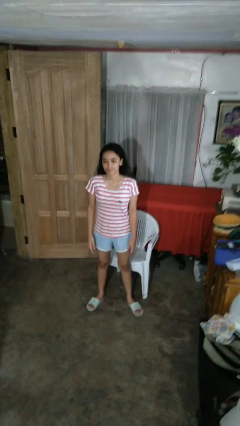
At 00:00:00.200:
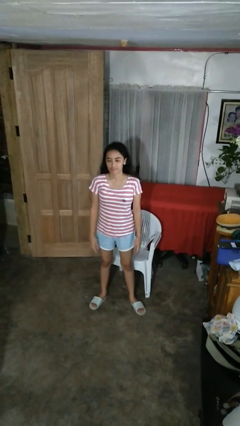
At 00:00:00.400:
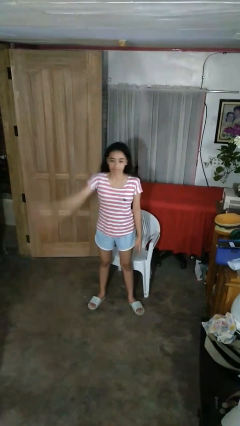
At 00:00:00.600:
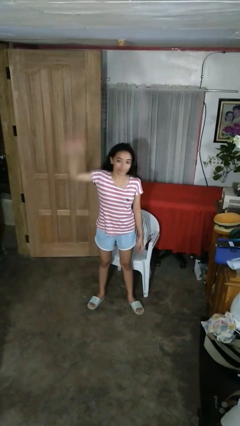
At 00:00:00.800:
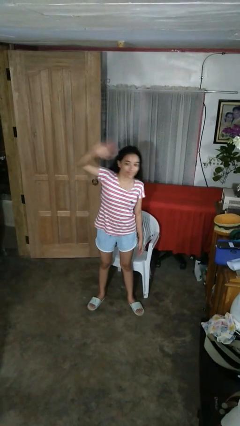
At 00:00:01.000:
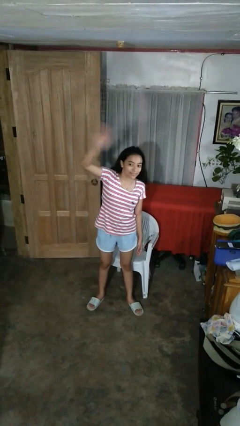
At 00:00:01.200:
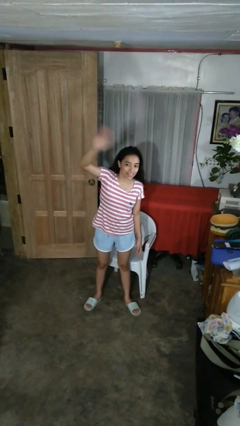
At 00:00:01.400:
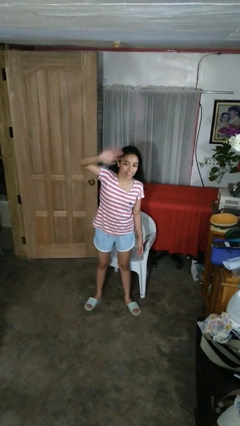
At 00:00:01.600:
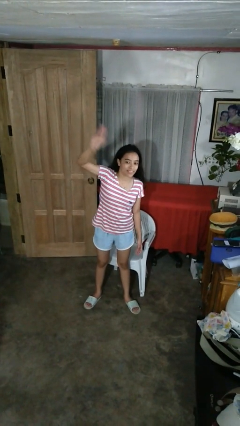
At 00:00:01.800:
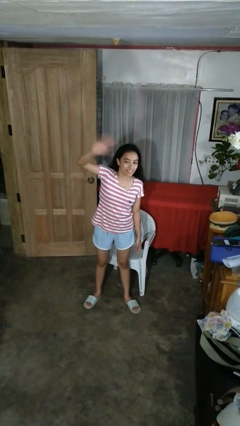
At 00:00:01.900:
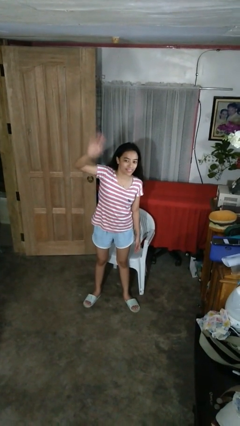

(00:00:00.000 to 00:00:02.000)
person waves at person

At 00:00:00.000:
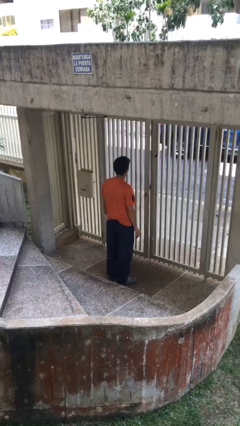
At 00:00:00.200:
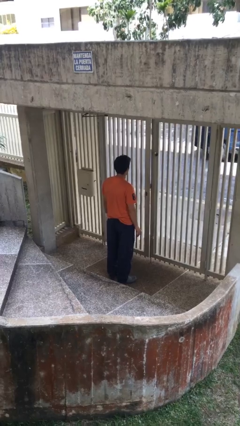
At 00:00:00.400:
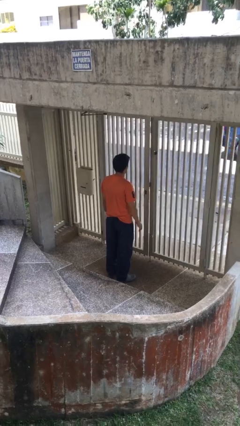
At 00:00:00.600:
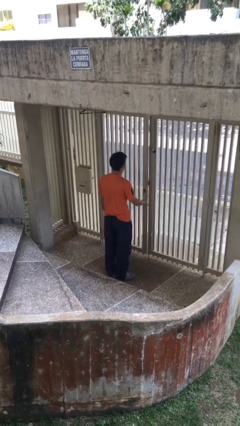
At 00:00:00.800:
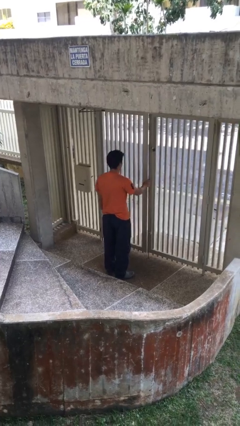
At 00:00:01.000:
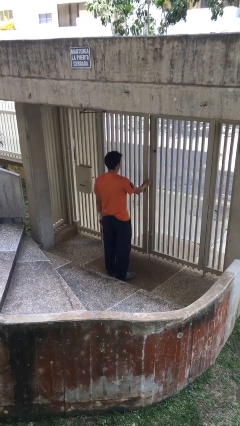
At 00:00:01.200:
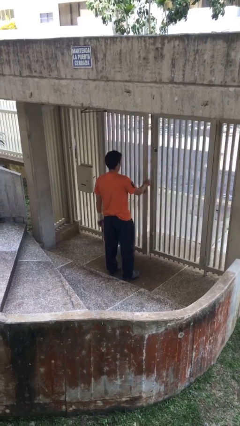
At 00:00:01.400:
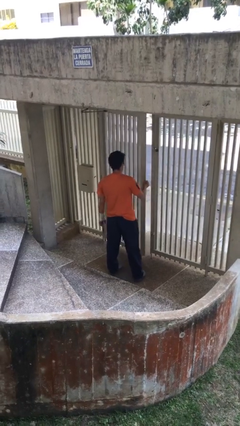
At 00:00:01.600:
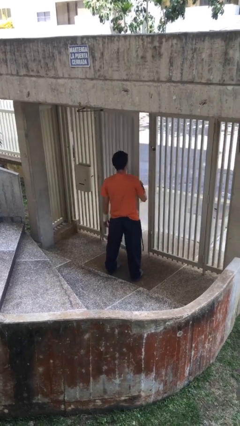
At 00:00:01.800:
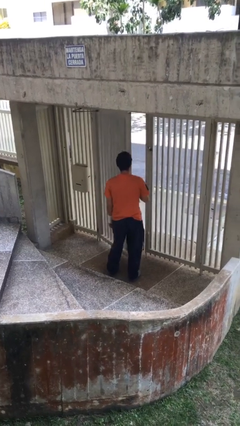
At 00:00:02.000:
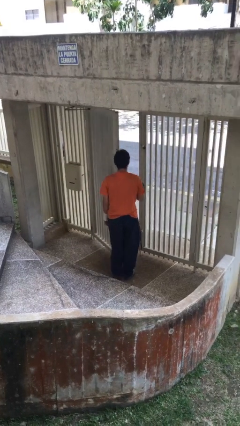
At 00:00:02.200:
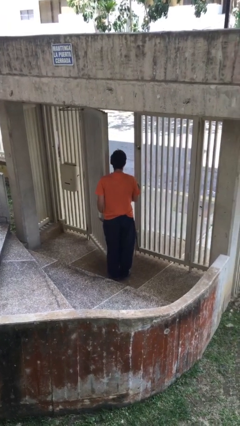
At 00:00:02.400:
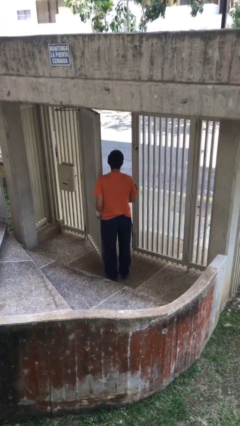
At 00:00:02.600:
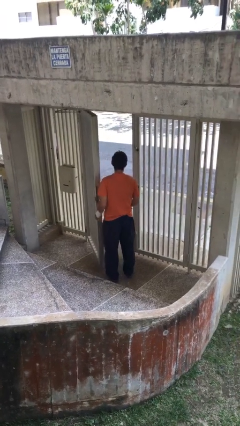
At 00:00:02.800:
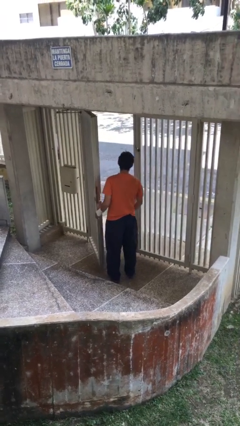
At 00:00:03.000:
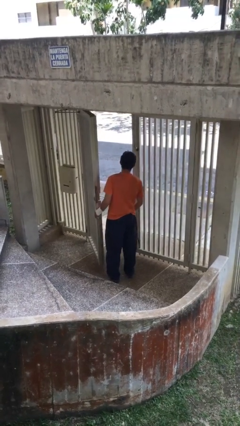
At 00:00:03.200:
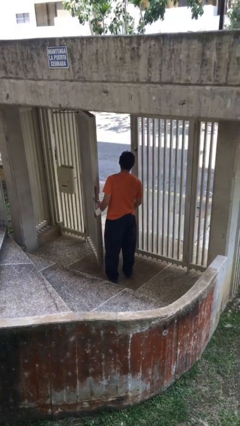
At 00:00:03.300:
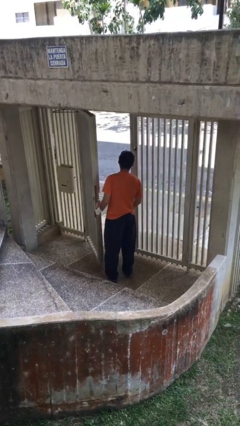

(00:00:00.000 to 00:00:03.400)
person opens facility door

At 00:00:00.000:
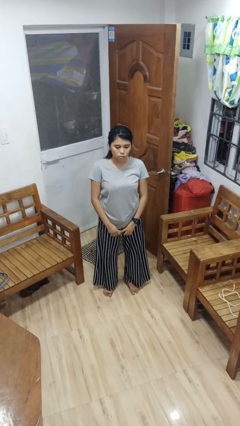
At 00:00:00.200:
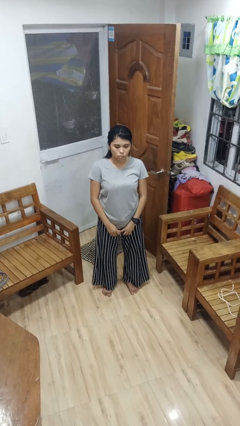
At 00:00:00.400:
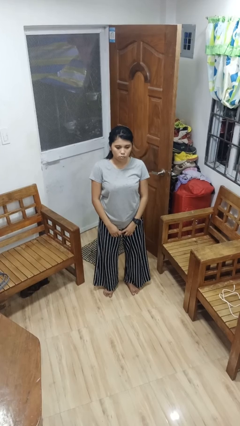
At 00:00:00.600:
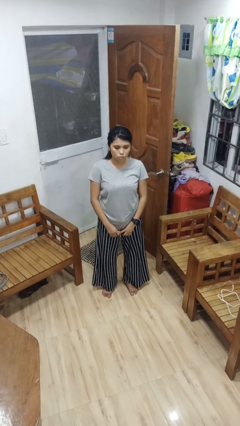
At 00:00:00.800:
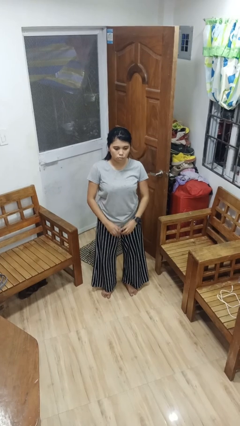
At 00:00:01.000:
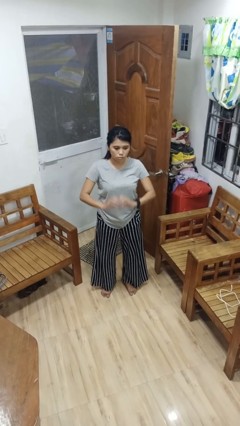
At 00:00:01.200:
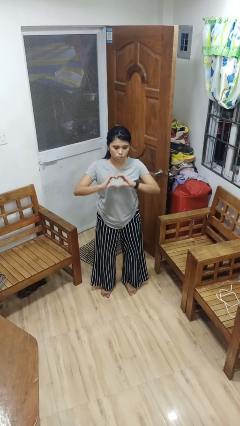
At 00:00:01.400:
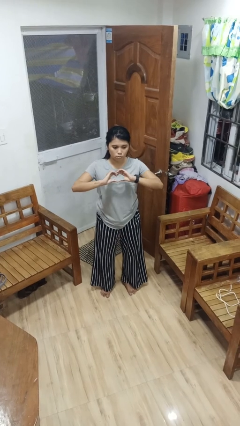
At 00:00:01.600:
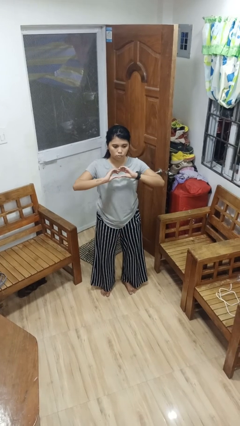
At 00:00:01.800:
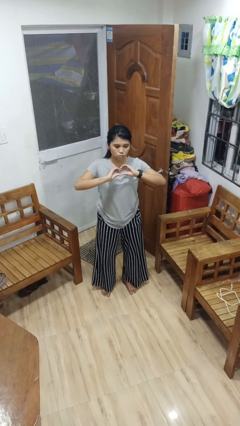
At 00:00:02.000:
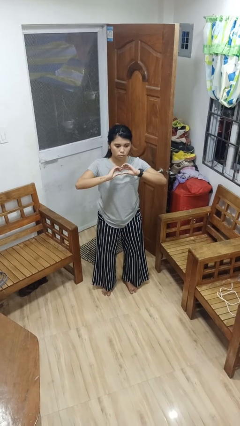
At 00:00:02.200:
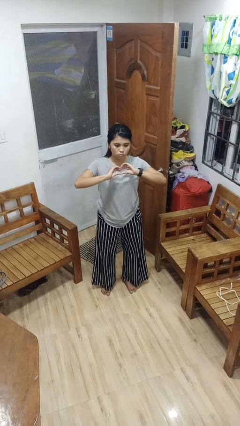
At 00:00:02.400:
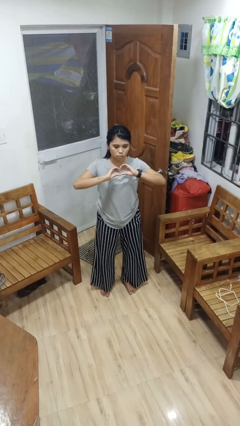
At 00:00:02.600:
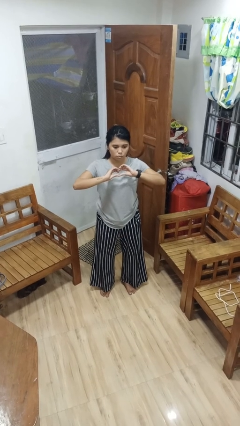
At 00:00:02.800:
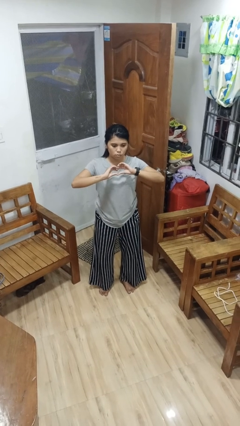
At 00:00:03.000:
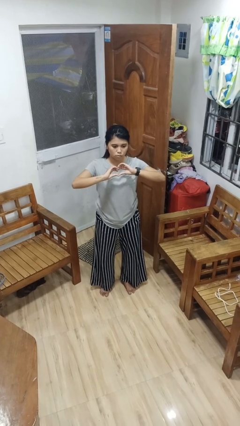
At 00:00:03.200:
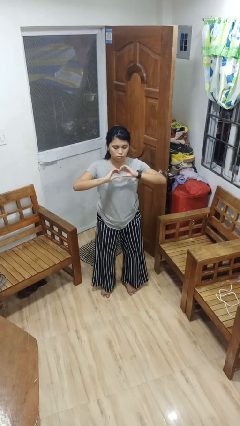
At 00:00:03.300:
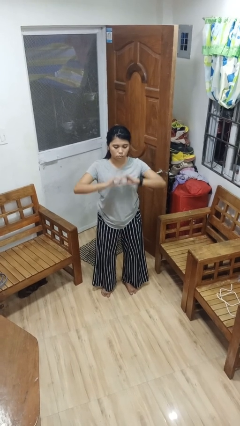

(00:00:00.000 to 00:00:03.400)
person gestures heart

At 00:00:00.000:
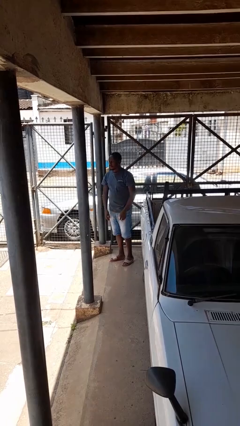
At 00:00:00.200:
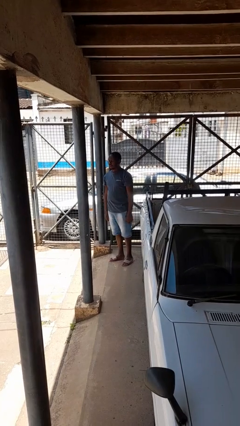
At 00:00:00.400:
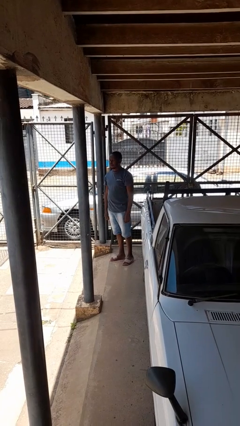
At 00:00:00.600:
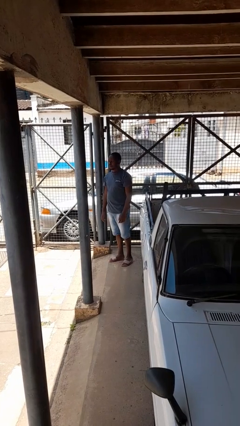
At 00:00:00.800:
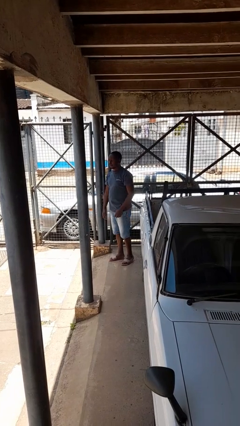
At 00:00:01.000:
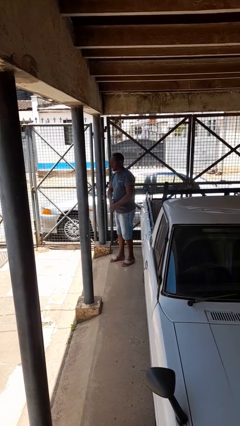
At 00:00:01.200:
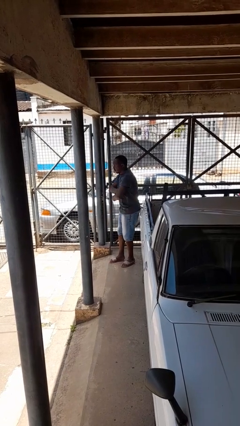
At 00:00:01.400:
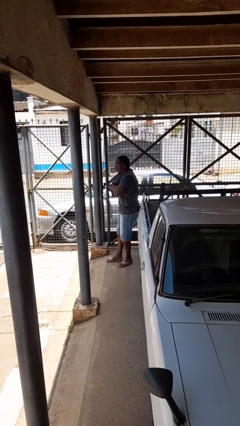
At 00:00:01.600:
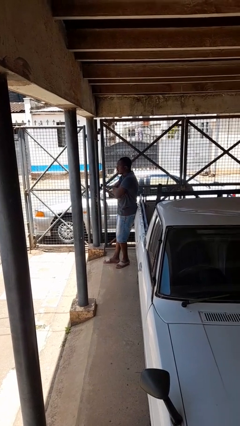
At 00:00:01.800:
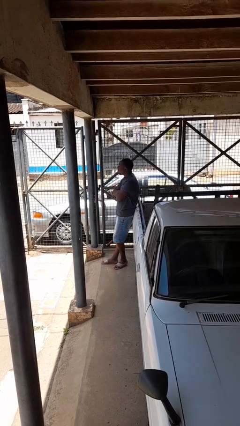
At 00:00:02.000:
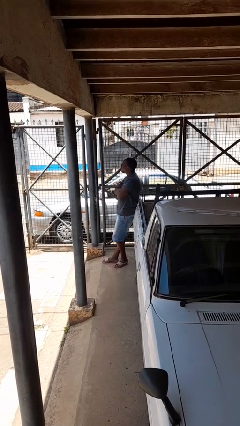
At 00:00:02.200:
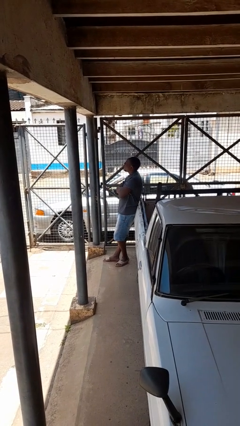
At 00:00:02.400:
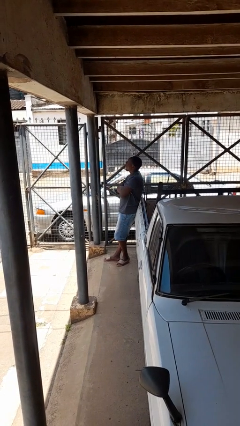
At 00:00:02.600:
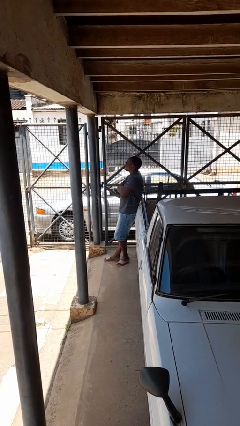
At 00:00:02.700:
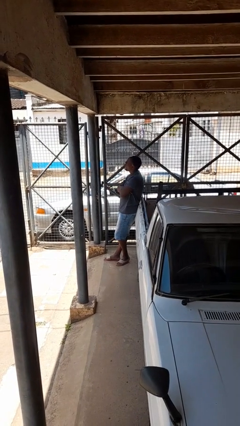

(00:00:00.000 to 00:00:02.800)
person leans against car

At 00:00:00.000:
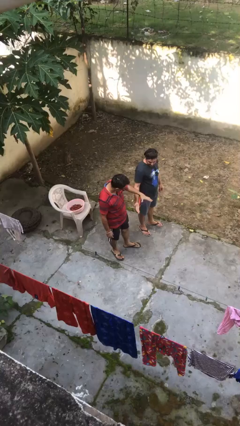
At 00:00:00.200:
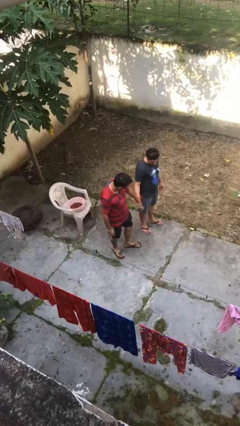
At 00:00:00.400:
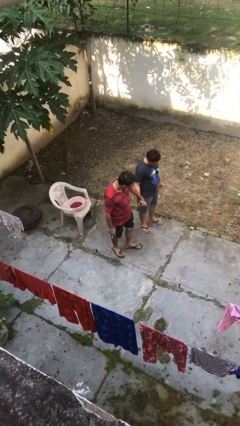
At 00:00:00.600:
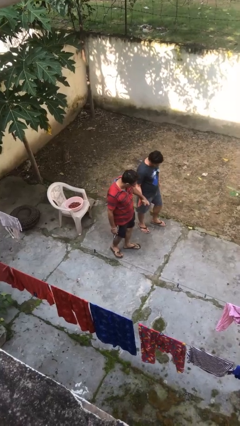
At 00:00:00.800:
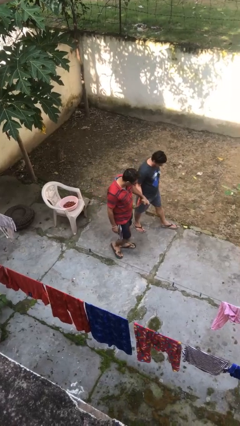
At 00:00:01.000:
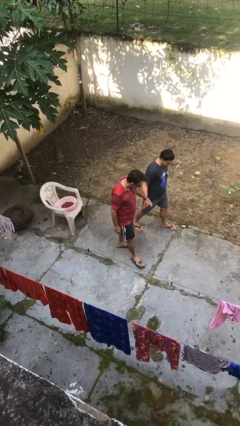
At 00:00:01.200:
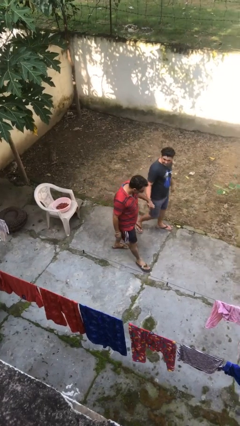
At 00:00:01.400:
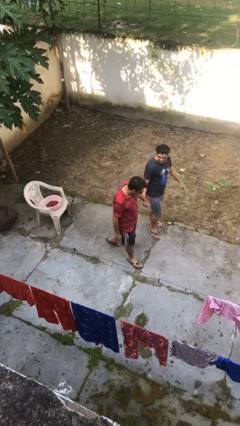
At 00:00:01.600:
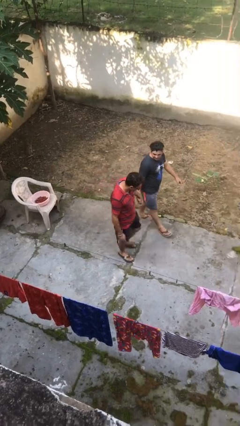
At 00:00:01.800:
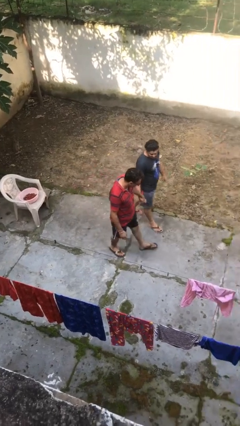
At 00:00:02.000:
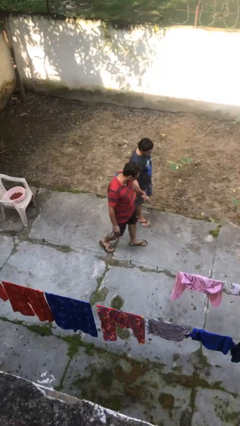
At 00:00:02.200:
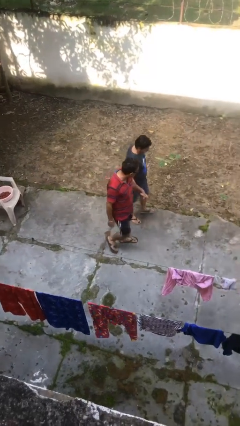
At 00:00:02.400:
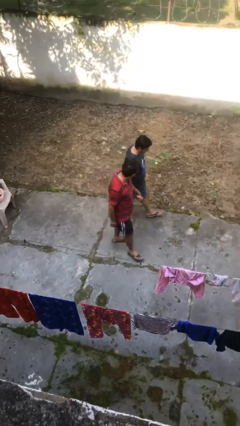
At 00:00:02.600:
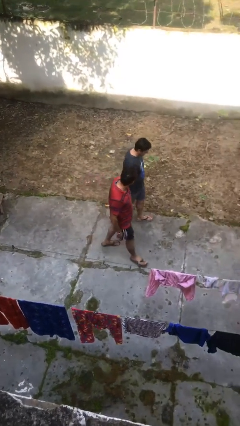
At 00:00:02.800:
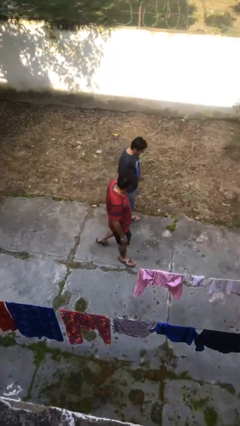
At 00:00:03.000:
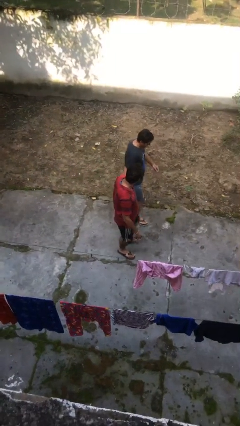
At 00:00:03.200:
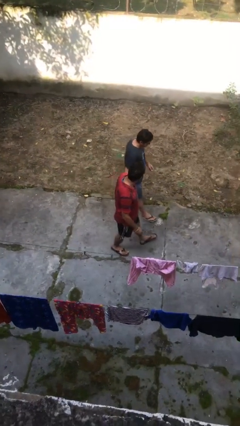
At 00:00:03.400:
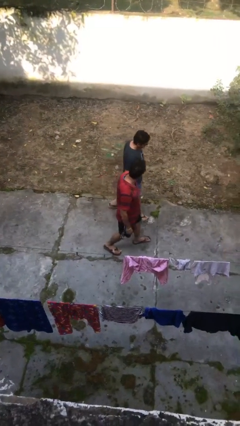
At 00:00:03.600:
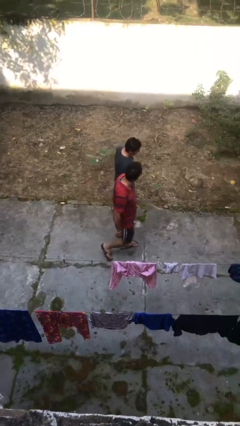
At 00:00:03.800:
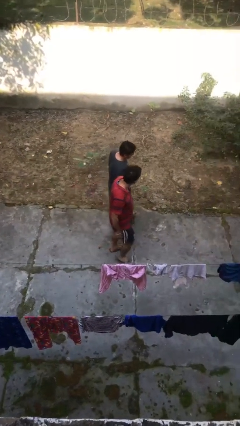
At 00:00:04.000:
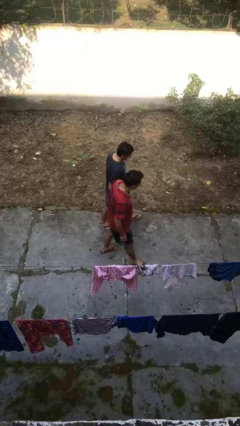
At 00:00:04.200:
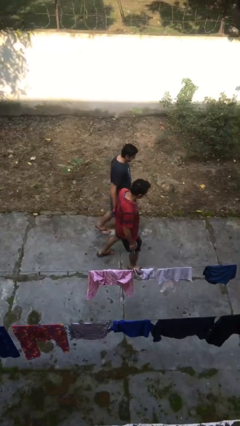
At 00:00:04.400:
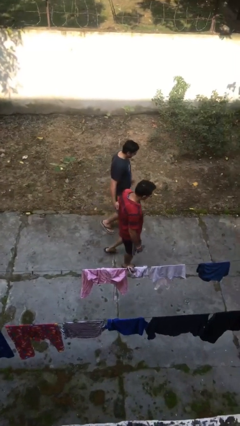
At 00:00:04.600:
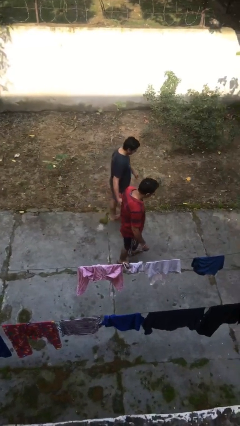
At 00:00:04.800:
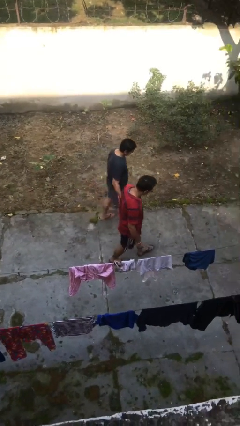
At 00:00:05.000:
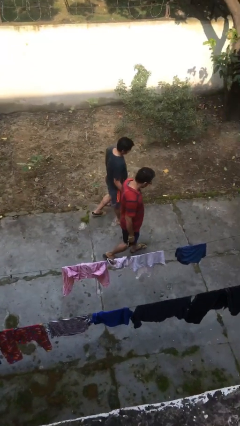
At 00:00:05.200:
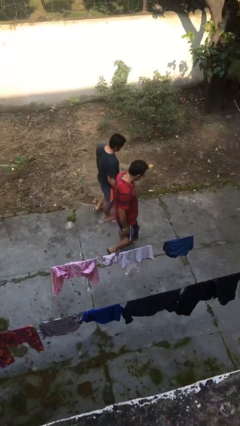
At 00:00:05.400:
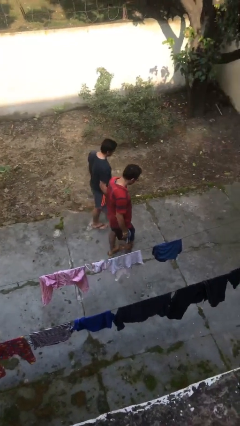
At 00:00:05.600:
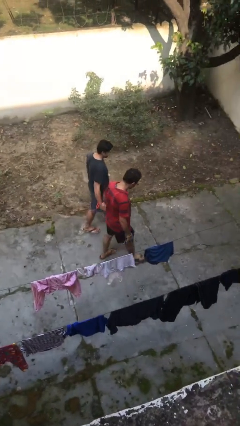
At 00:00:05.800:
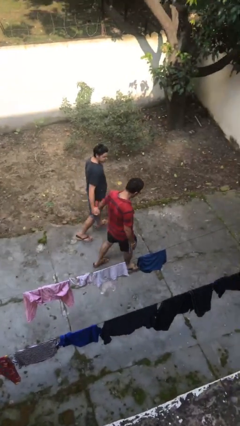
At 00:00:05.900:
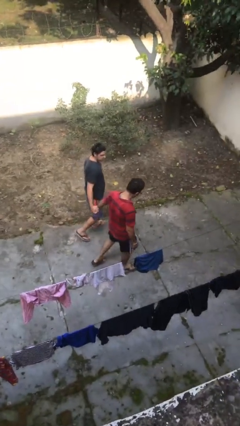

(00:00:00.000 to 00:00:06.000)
person holds hand
